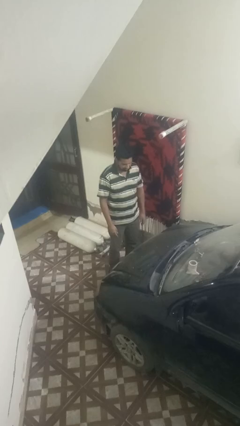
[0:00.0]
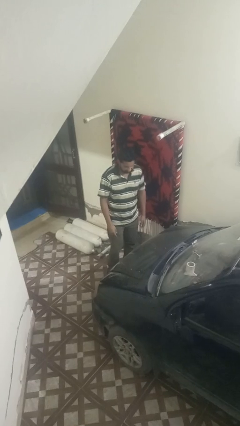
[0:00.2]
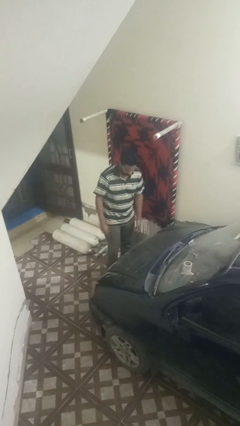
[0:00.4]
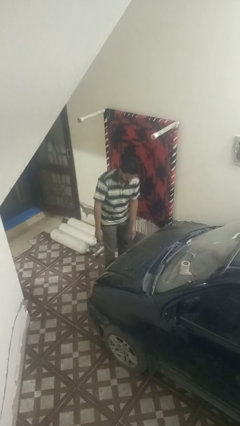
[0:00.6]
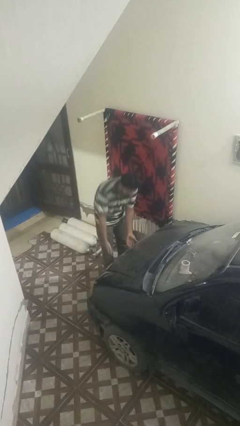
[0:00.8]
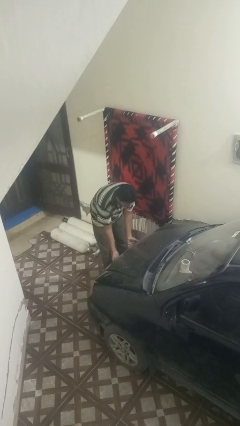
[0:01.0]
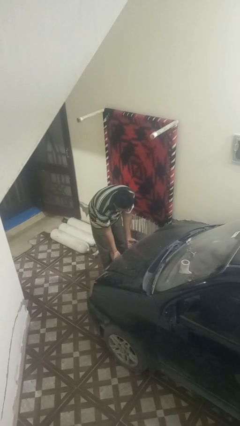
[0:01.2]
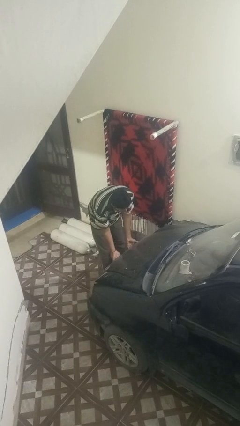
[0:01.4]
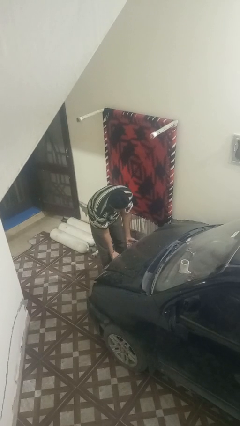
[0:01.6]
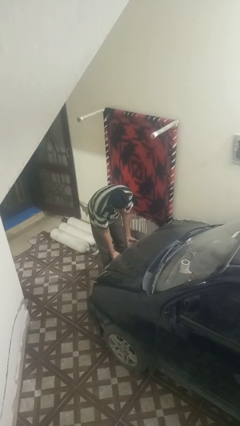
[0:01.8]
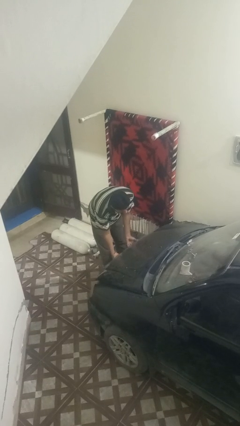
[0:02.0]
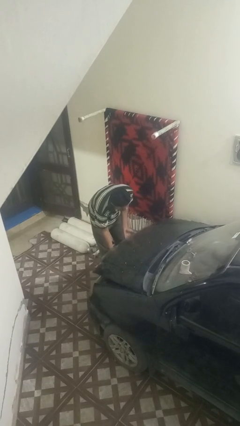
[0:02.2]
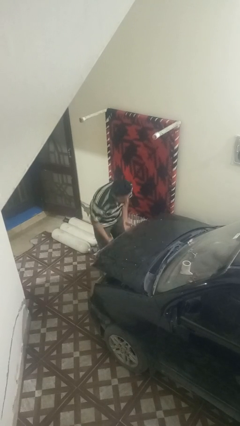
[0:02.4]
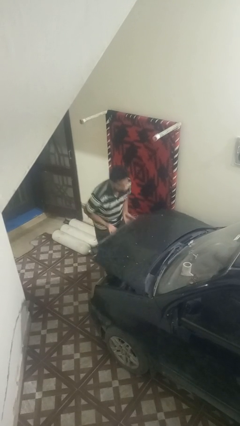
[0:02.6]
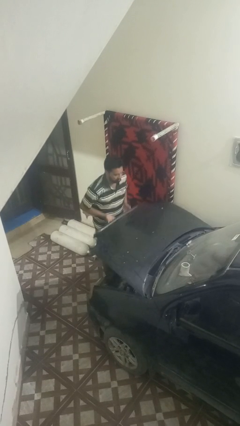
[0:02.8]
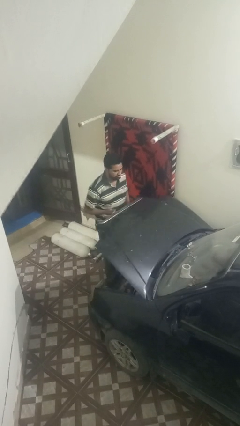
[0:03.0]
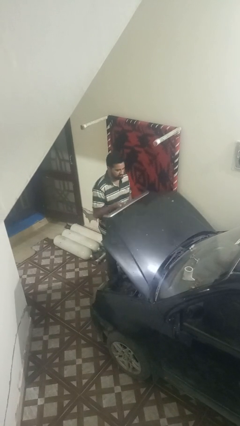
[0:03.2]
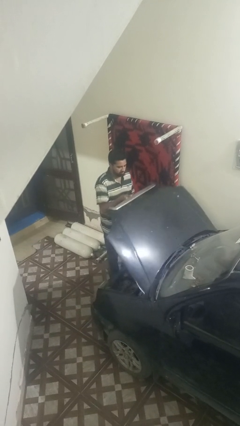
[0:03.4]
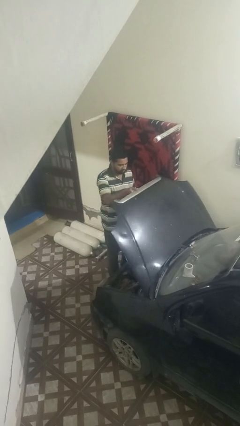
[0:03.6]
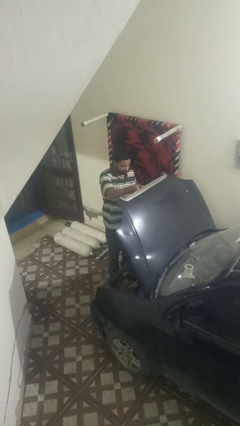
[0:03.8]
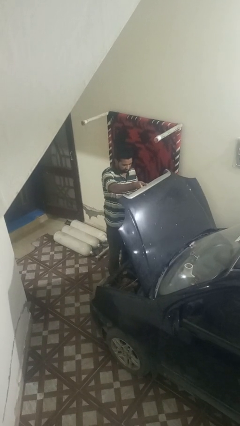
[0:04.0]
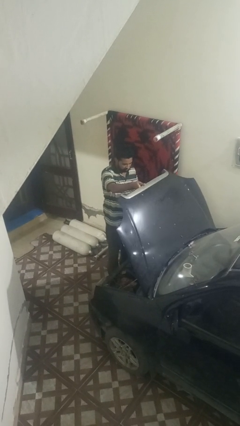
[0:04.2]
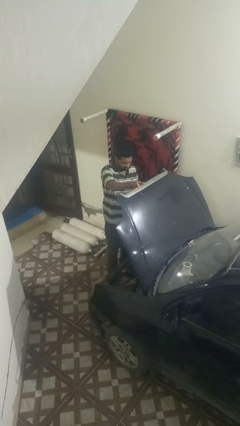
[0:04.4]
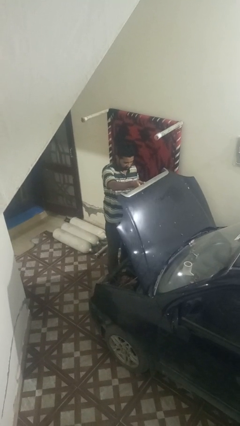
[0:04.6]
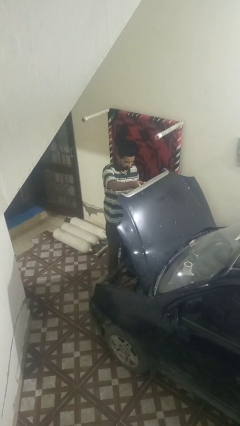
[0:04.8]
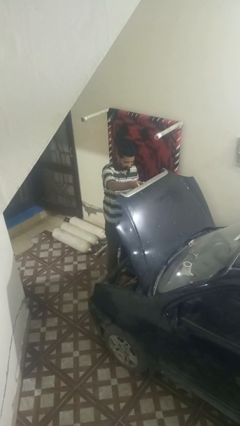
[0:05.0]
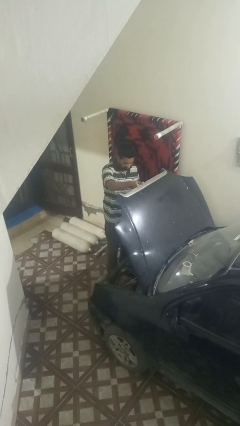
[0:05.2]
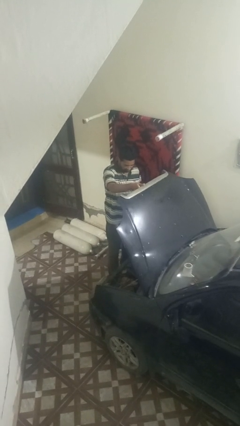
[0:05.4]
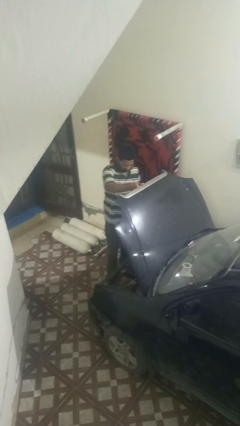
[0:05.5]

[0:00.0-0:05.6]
person opens car hood

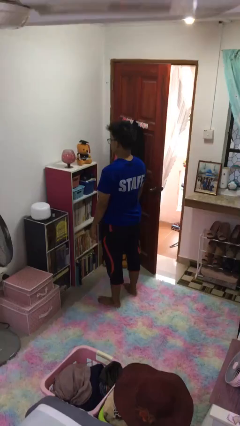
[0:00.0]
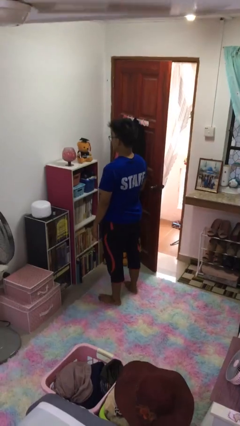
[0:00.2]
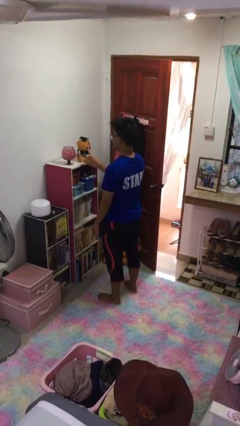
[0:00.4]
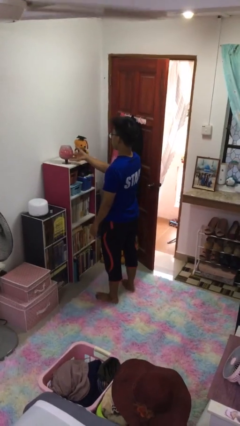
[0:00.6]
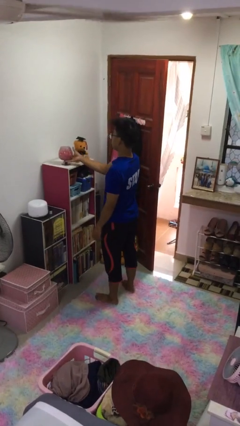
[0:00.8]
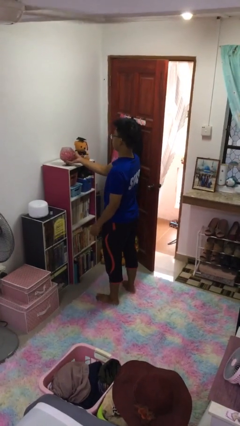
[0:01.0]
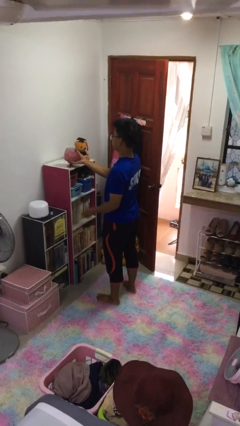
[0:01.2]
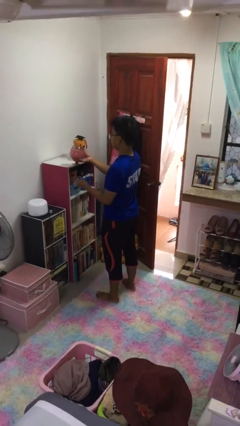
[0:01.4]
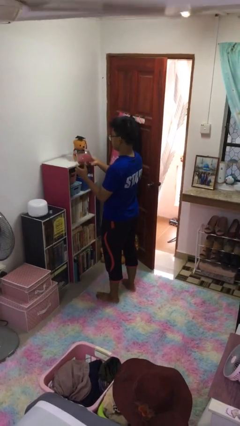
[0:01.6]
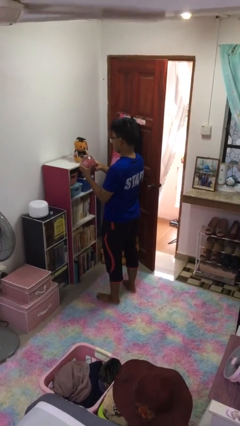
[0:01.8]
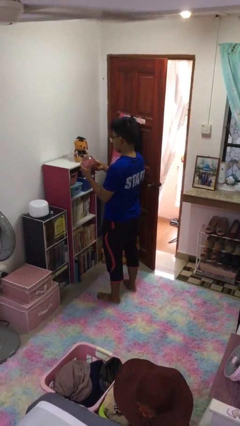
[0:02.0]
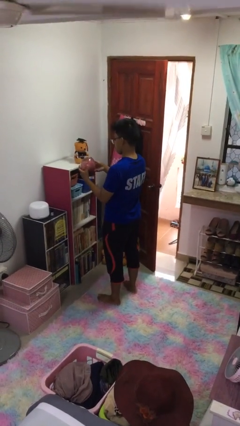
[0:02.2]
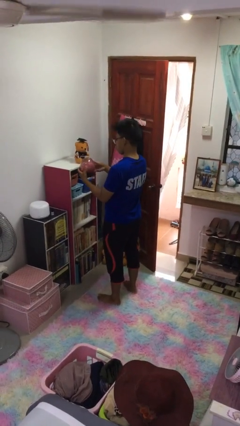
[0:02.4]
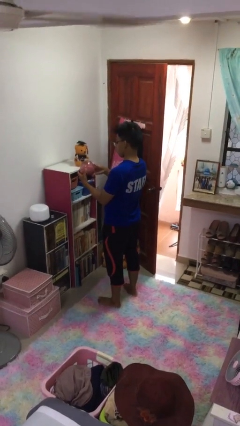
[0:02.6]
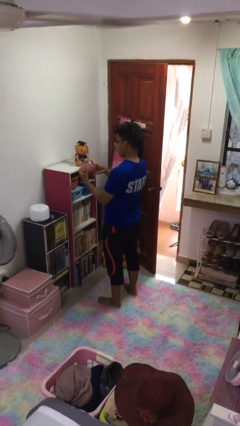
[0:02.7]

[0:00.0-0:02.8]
person picks up object from shelf

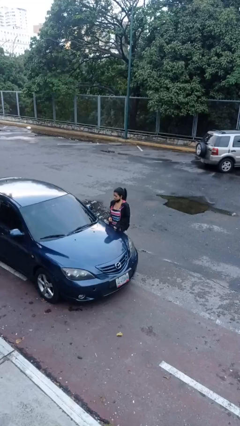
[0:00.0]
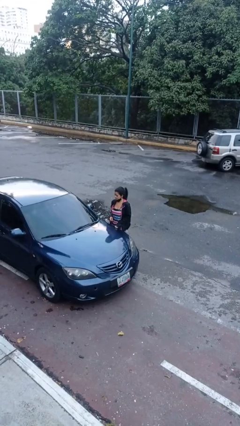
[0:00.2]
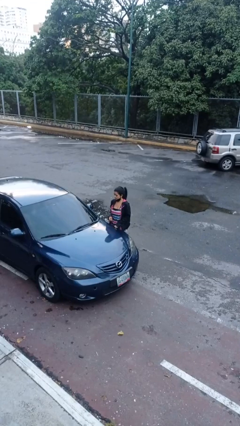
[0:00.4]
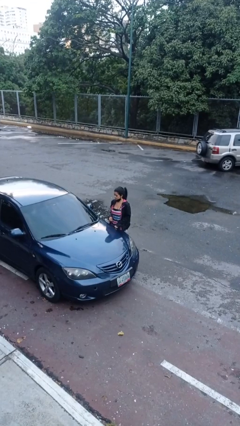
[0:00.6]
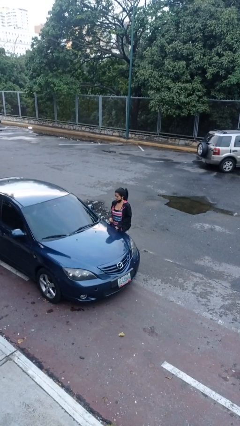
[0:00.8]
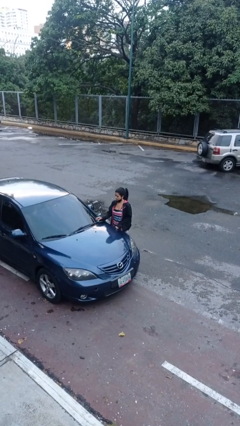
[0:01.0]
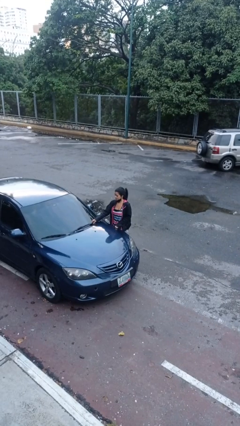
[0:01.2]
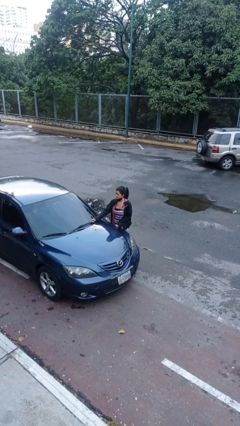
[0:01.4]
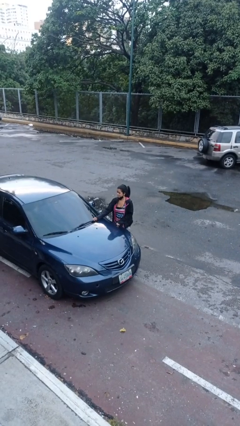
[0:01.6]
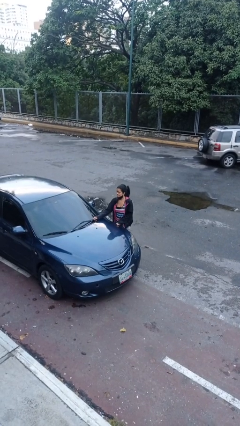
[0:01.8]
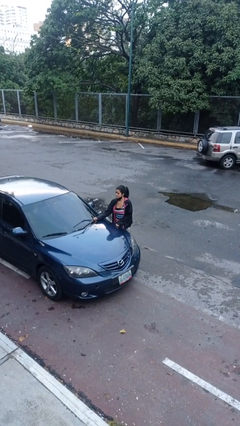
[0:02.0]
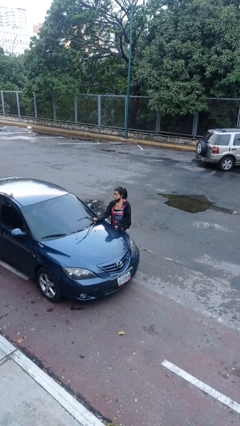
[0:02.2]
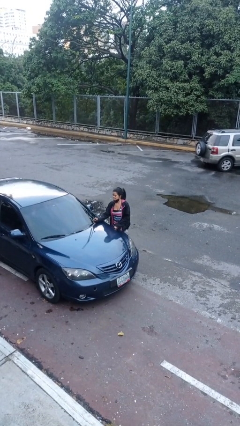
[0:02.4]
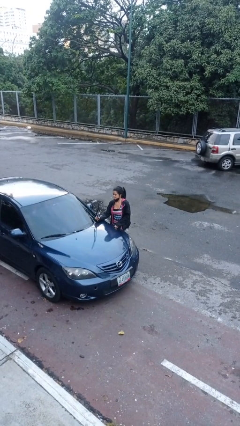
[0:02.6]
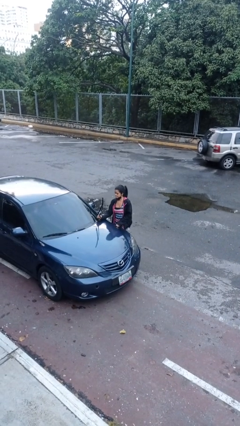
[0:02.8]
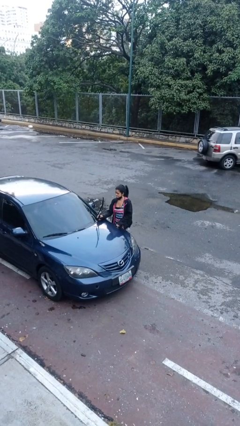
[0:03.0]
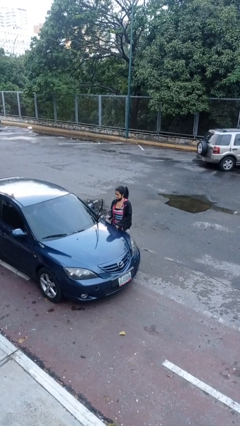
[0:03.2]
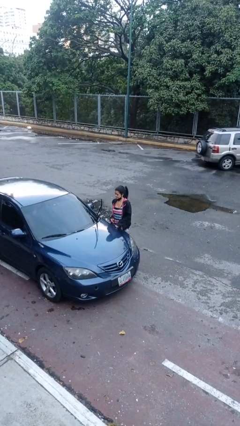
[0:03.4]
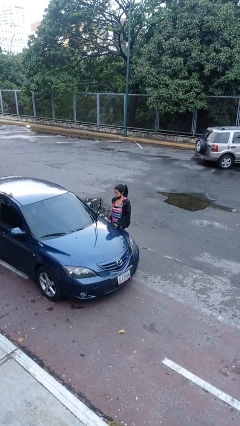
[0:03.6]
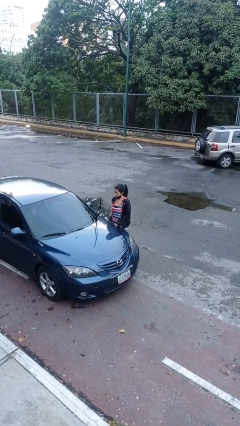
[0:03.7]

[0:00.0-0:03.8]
person flips up car wipers

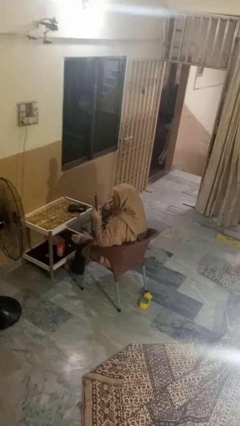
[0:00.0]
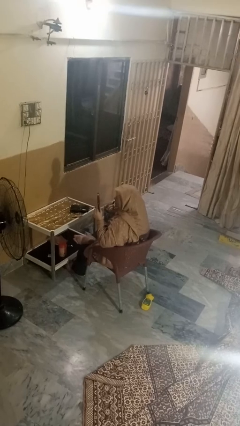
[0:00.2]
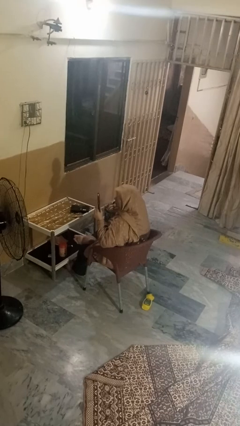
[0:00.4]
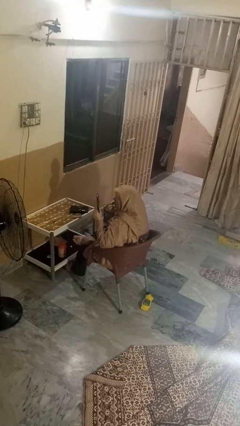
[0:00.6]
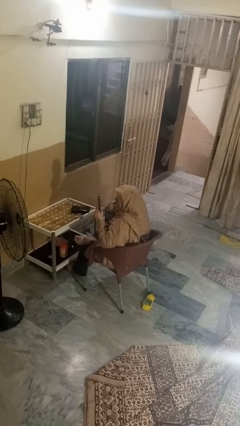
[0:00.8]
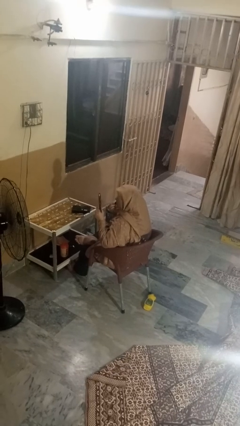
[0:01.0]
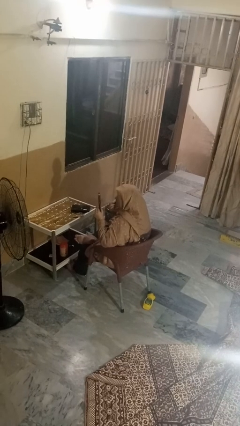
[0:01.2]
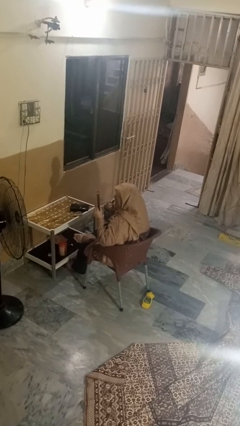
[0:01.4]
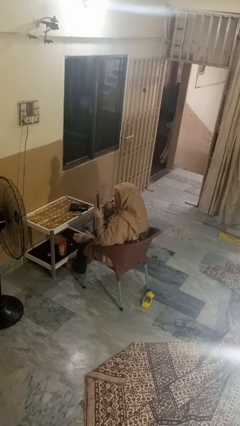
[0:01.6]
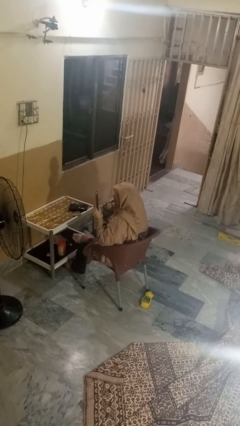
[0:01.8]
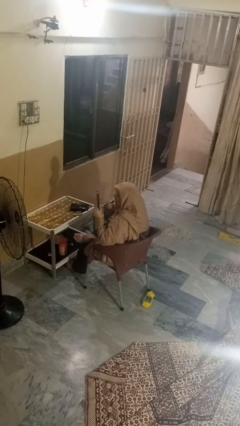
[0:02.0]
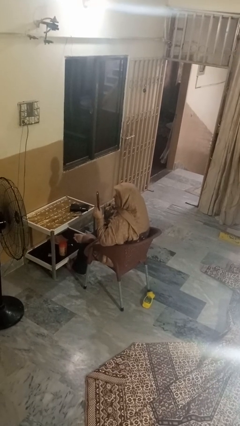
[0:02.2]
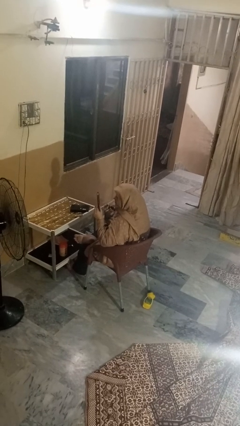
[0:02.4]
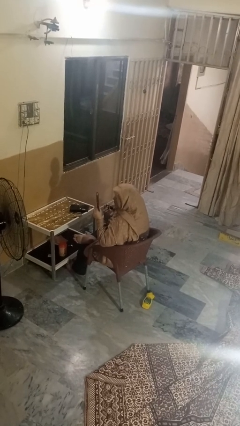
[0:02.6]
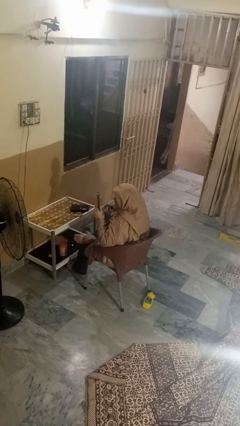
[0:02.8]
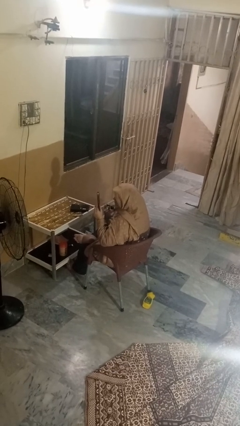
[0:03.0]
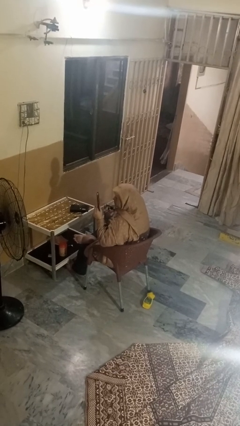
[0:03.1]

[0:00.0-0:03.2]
person applies lip makeup

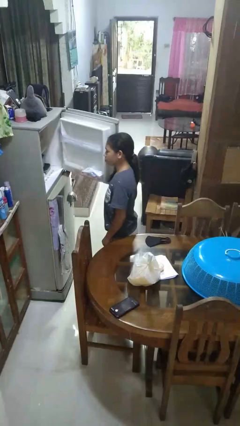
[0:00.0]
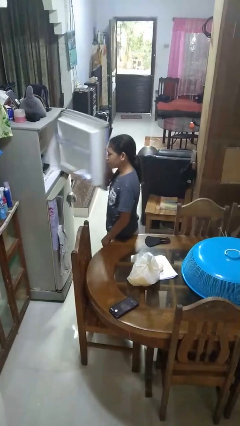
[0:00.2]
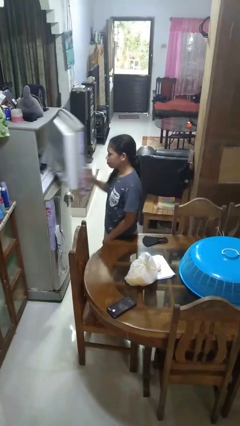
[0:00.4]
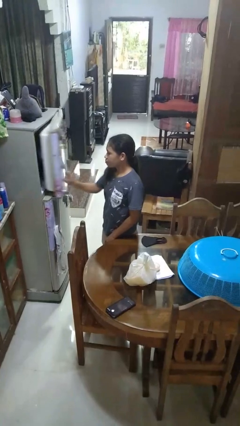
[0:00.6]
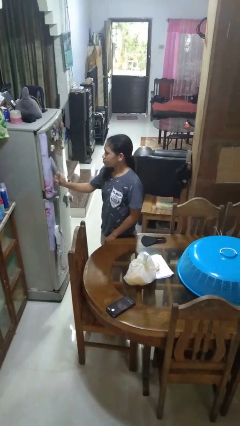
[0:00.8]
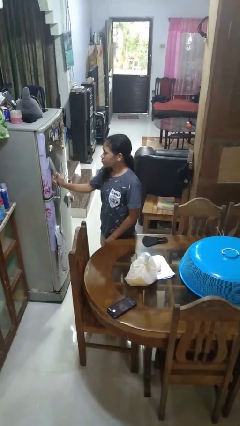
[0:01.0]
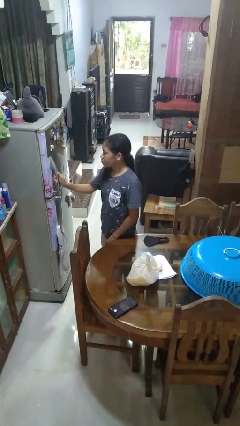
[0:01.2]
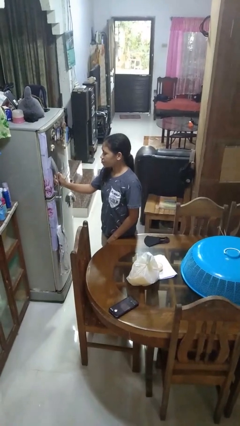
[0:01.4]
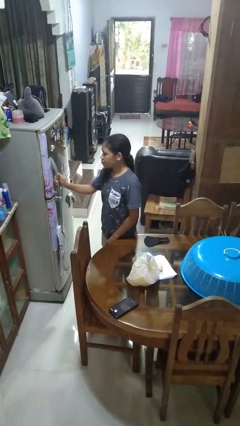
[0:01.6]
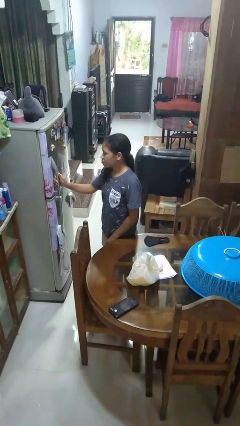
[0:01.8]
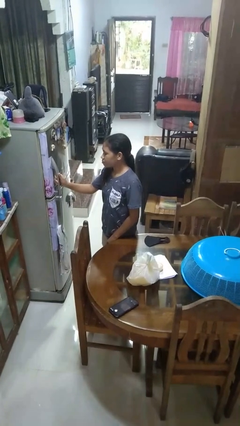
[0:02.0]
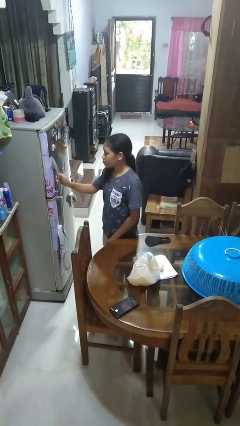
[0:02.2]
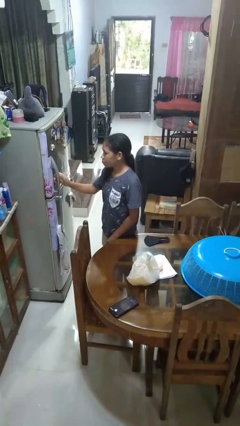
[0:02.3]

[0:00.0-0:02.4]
person closes refrigerator
